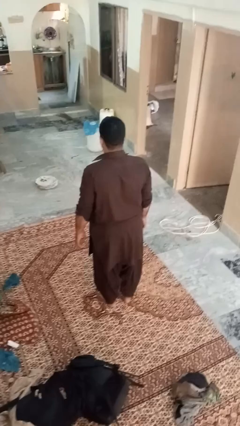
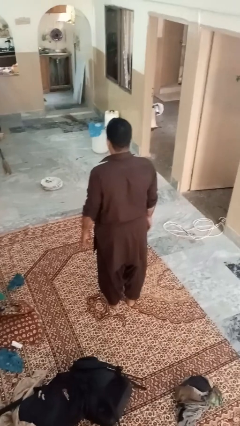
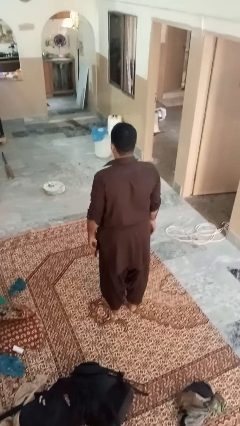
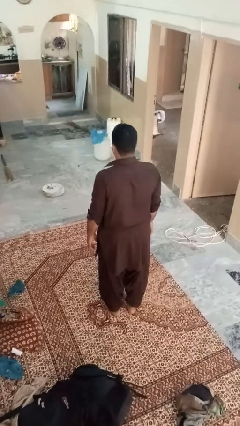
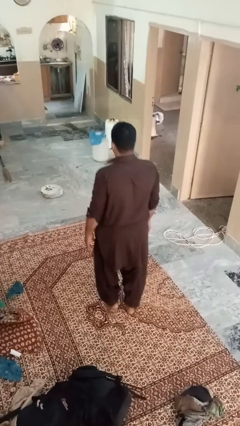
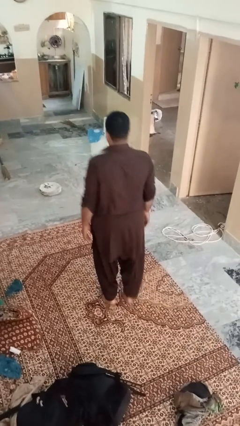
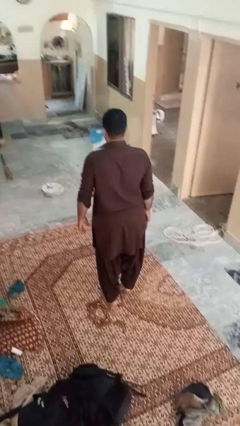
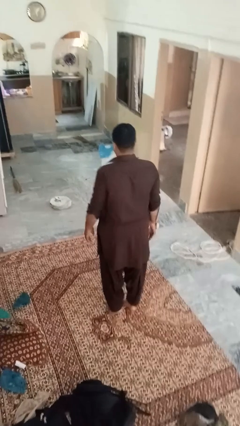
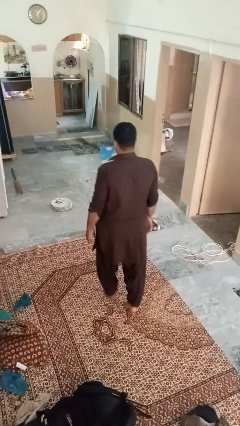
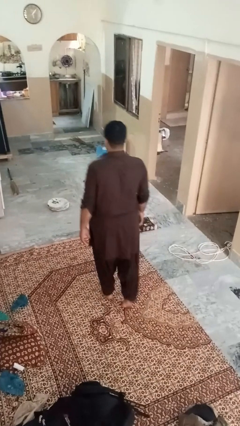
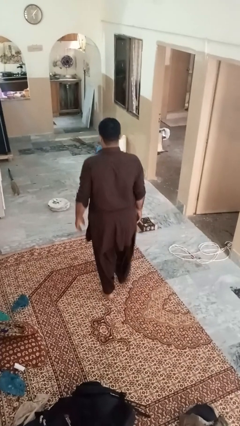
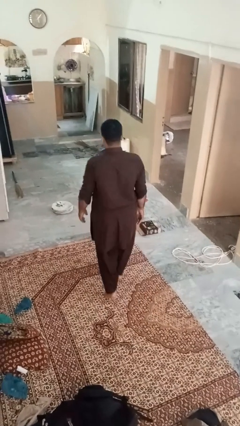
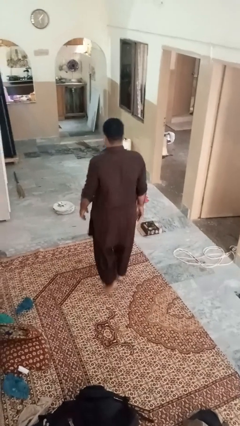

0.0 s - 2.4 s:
person walks tiptoe

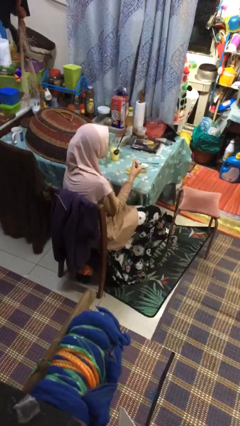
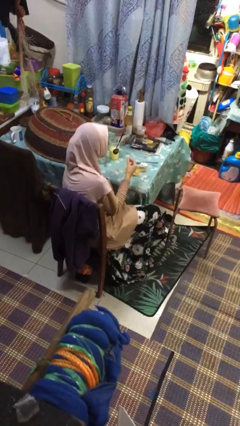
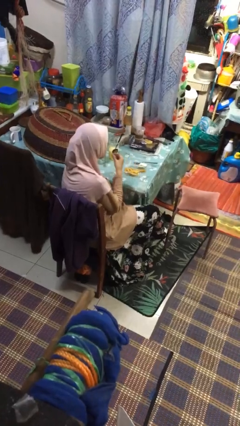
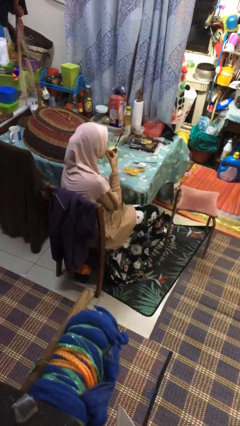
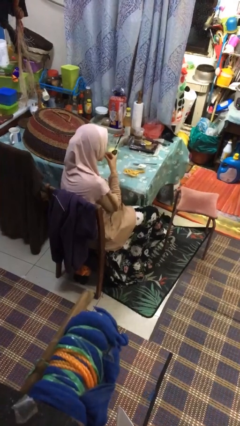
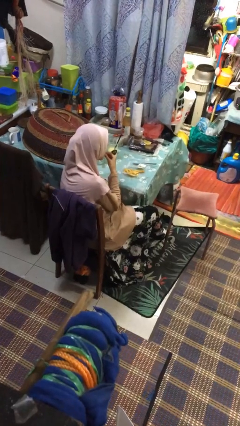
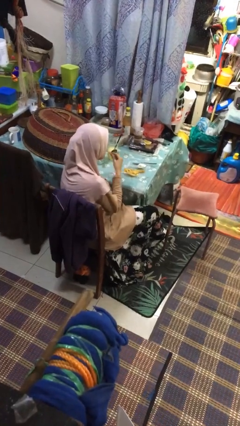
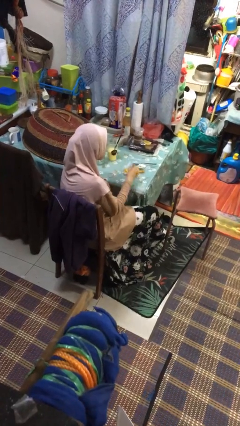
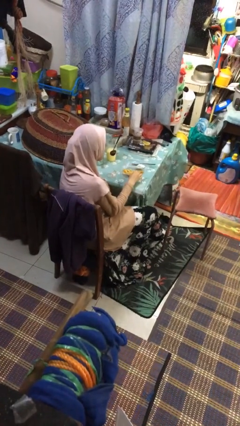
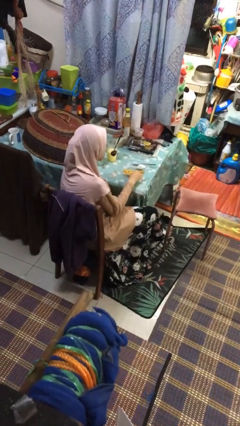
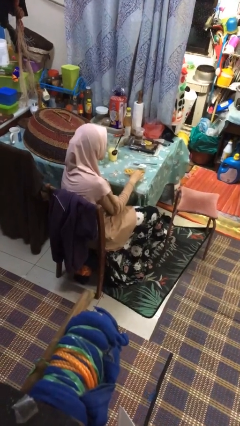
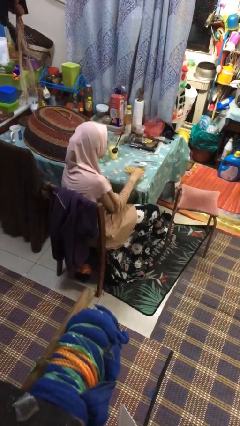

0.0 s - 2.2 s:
person eats with hands

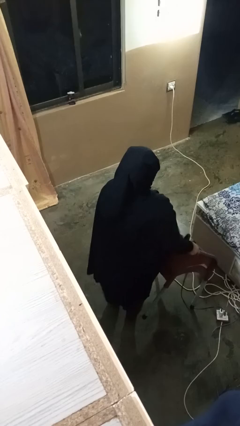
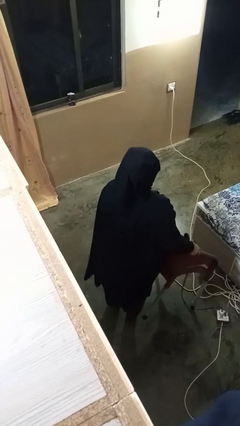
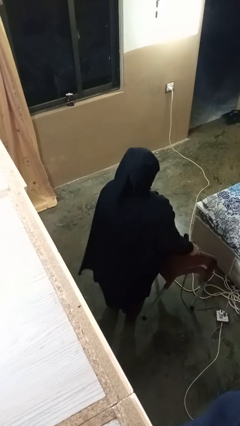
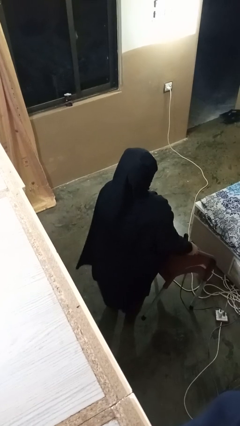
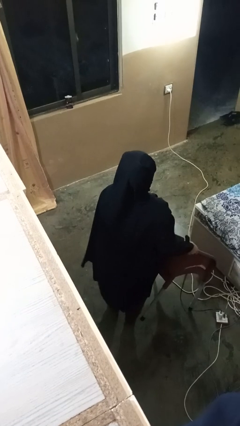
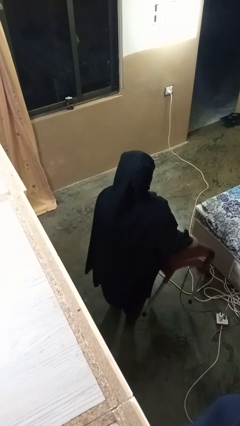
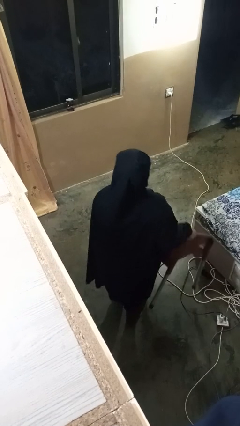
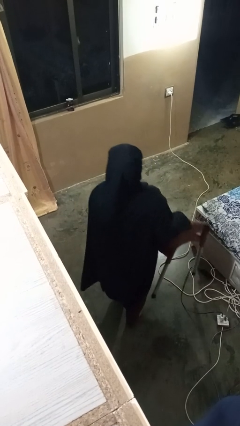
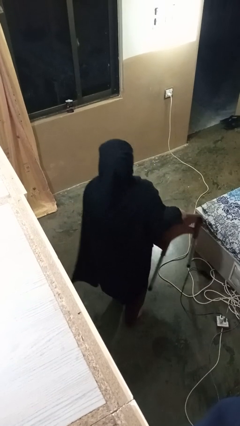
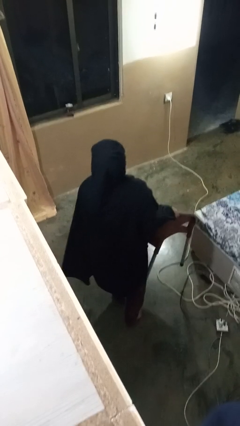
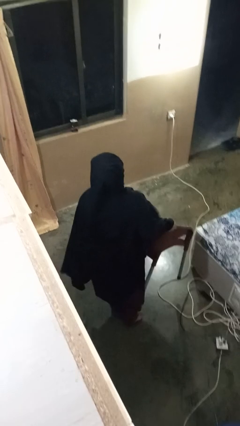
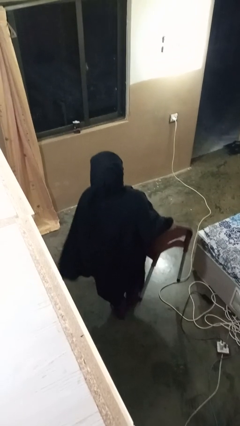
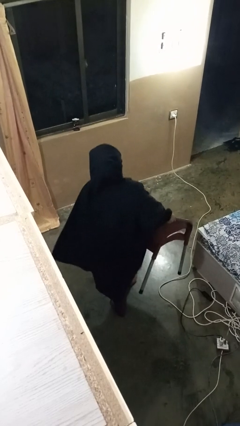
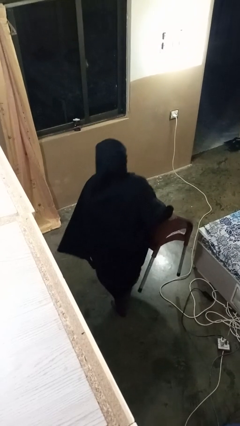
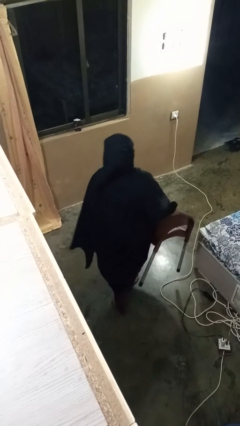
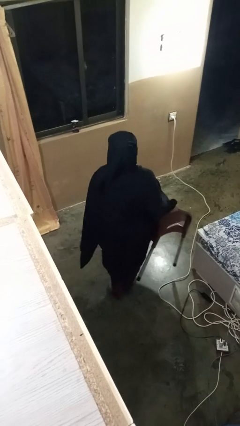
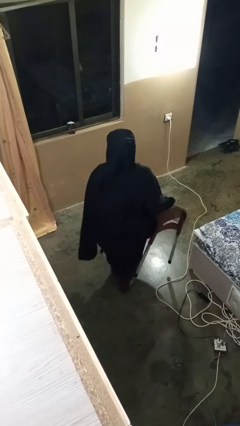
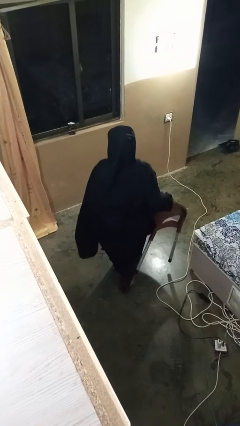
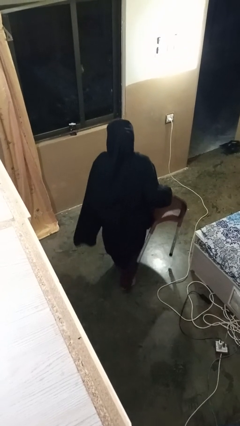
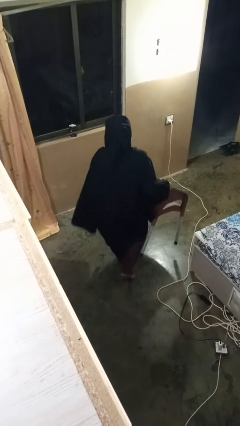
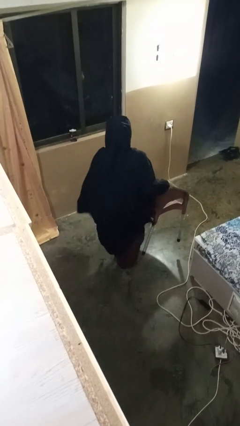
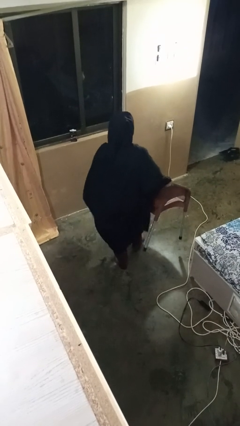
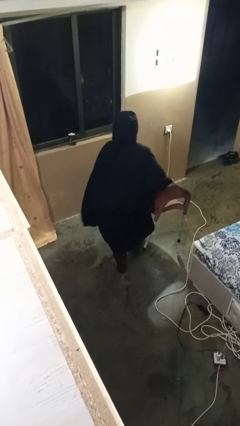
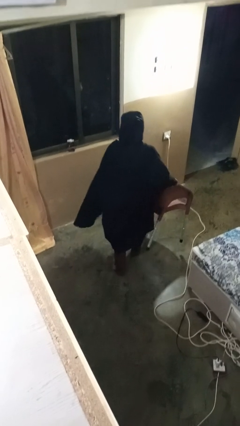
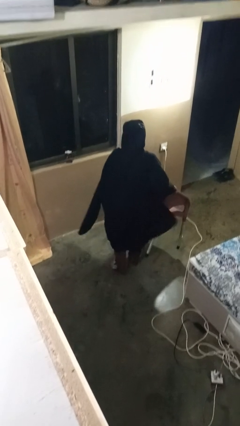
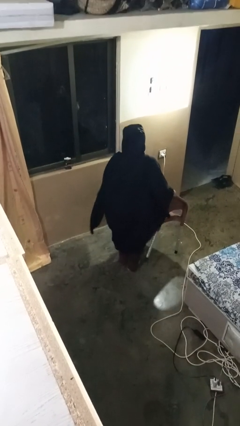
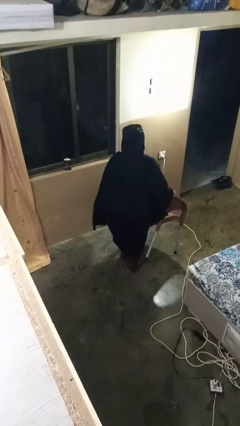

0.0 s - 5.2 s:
person carries furniture

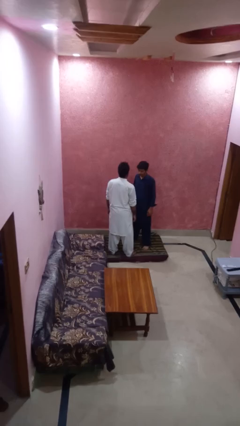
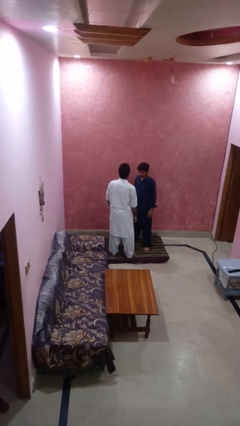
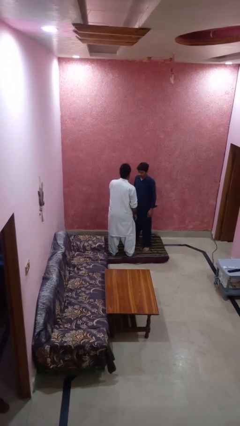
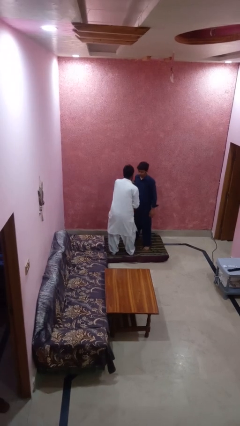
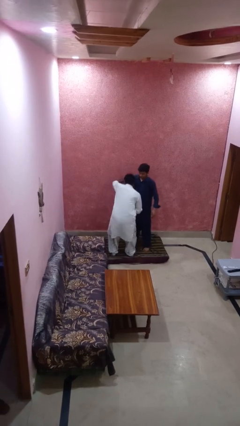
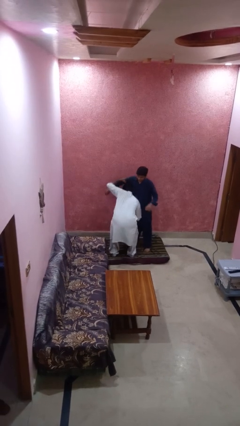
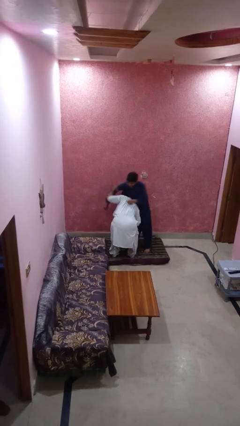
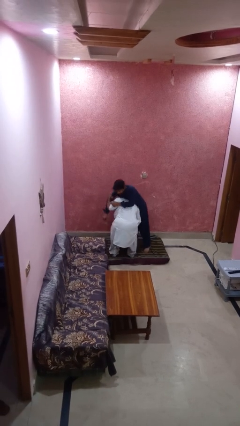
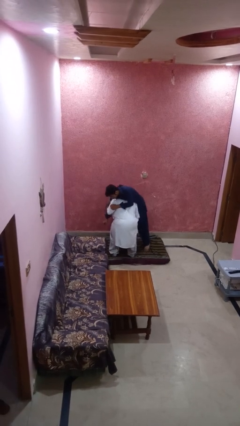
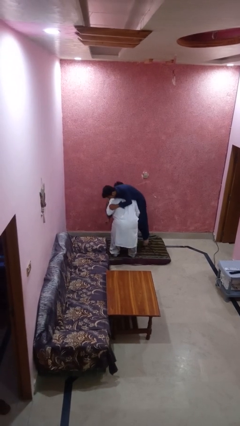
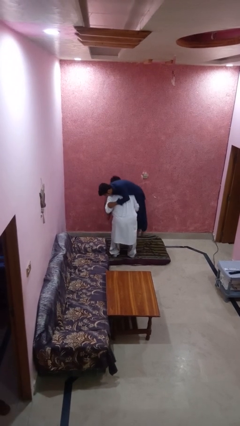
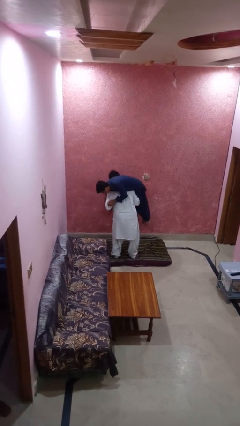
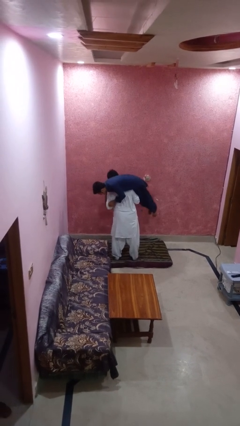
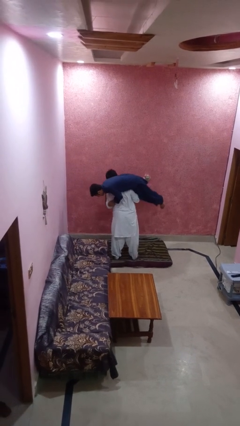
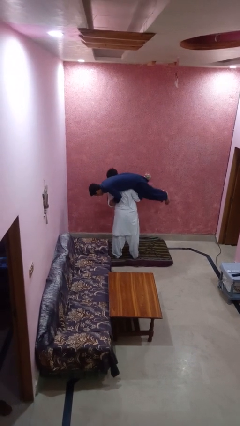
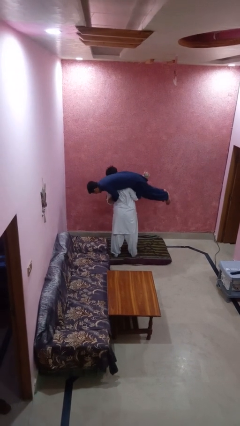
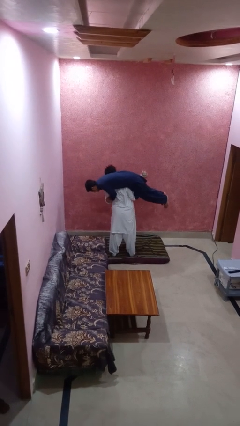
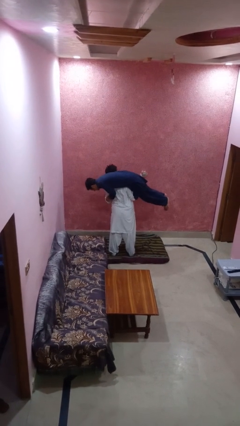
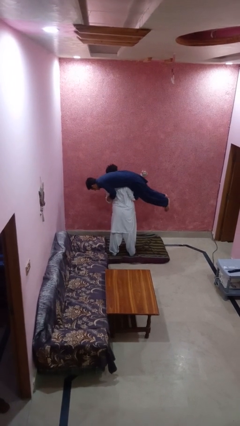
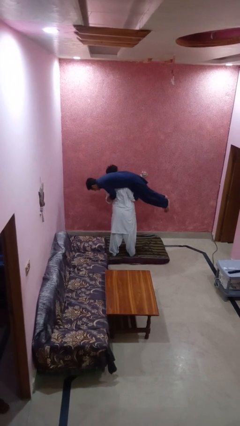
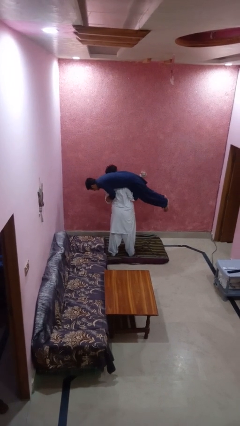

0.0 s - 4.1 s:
person carries person over shoulder

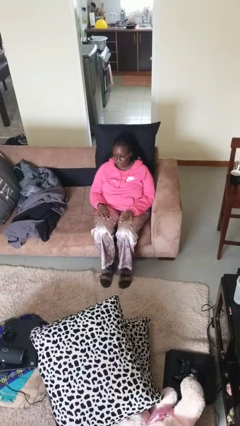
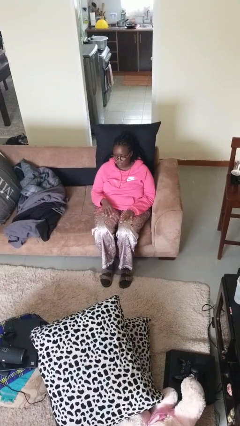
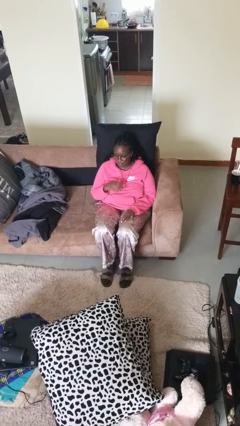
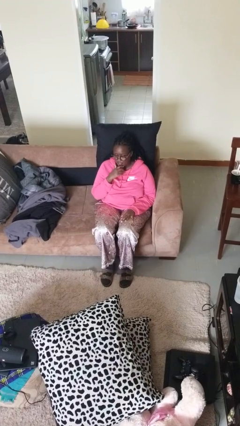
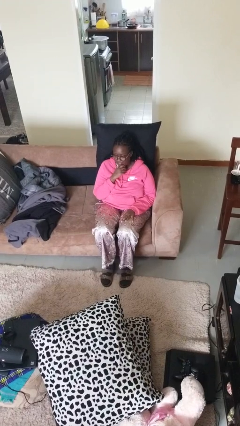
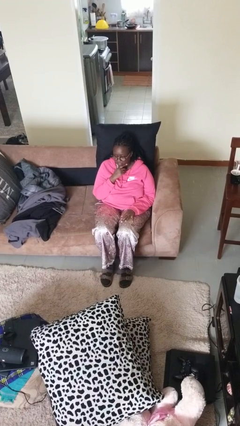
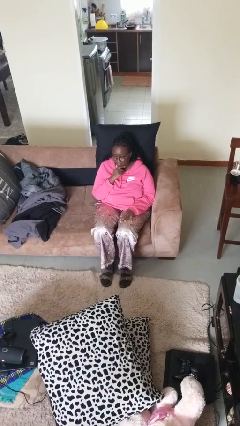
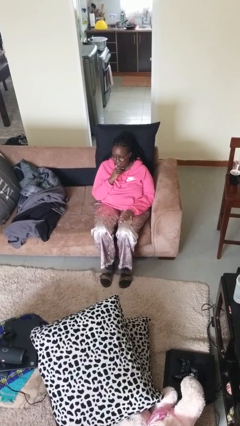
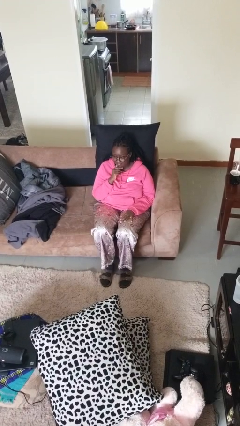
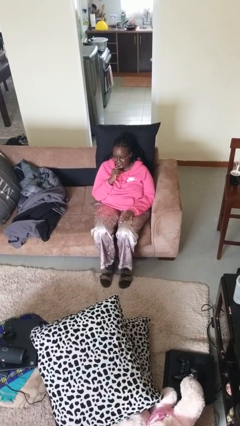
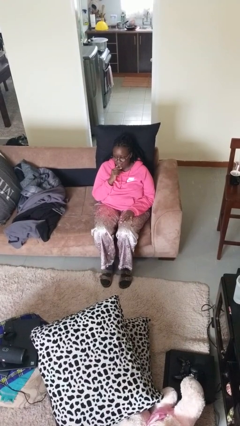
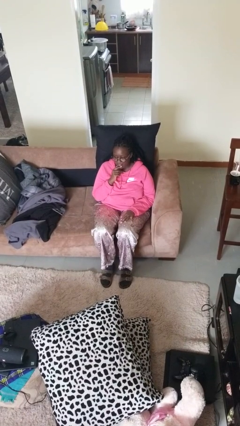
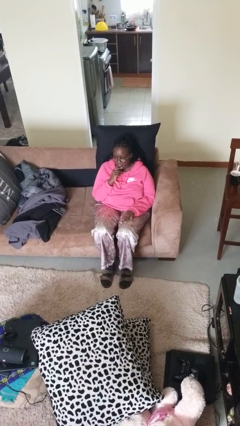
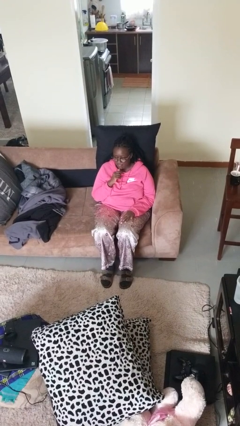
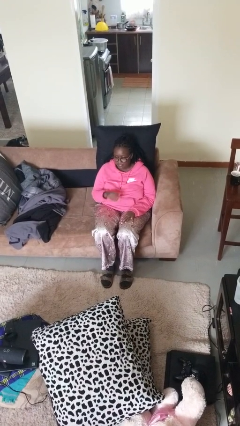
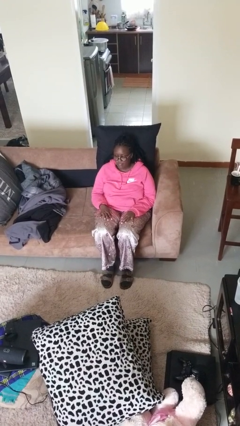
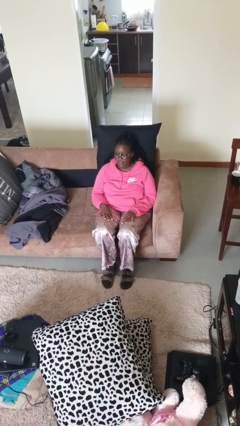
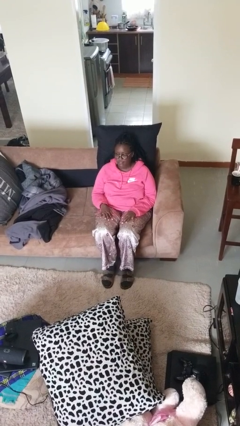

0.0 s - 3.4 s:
person strokes chin

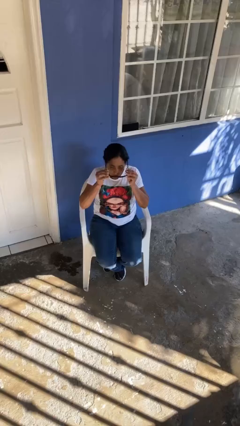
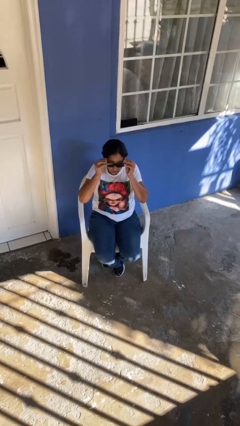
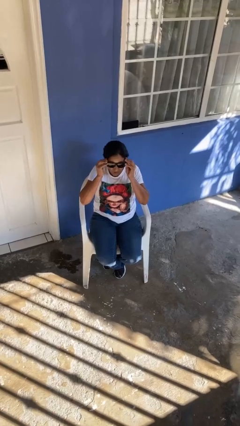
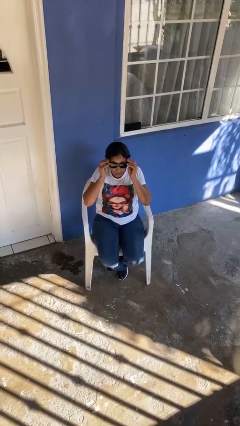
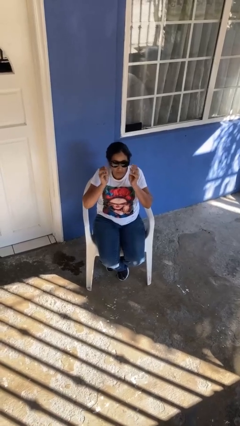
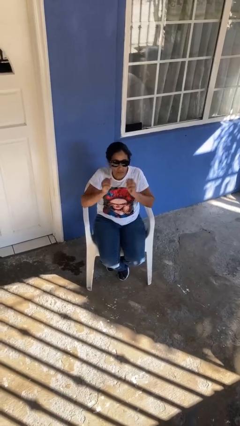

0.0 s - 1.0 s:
person puts on sunglasses
